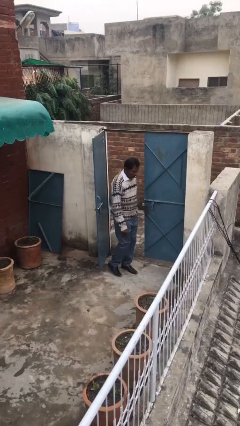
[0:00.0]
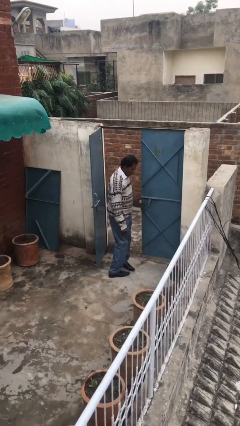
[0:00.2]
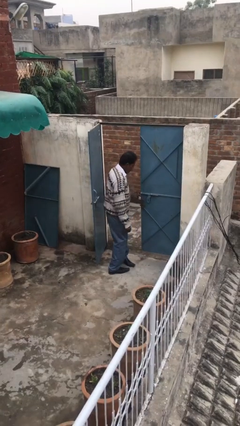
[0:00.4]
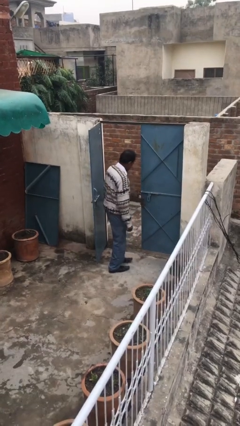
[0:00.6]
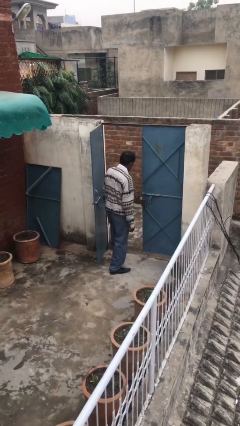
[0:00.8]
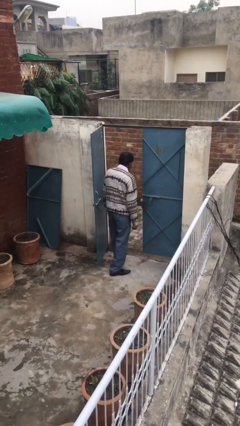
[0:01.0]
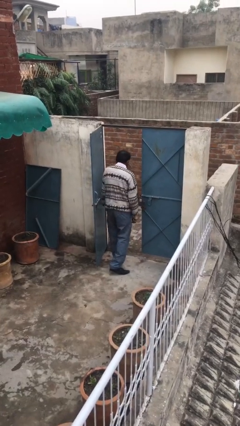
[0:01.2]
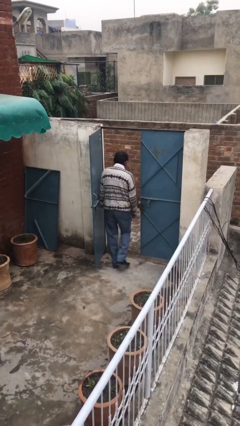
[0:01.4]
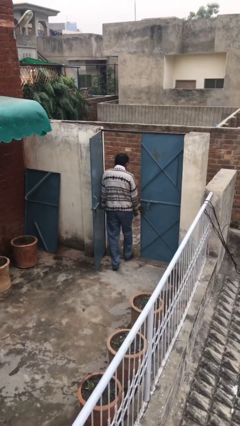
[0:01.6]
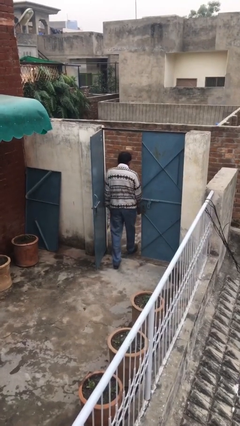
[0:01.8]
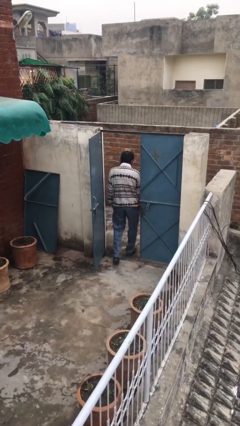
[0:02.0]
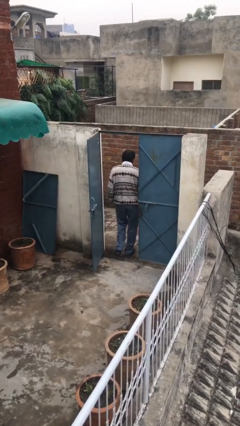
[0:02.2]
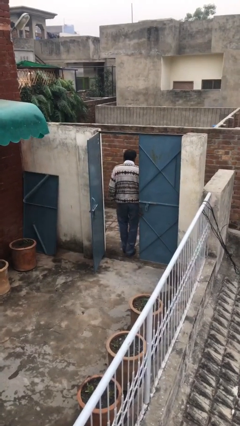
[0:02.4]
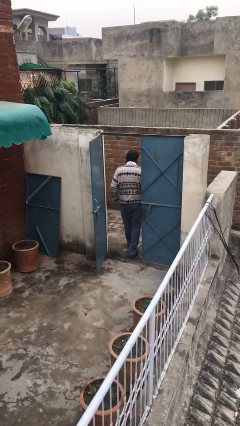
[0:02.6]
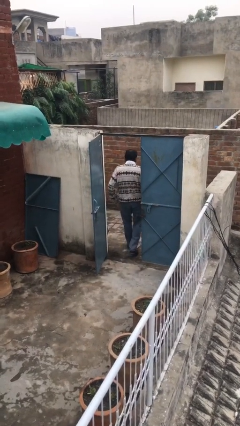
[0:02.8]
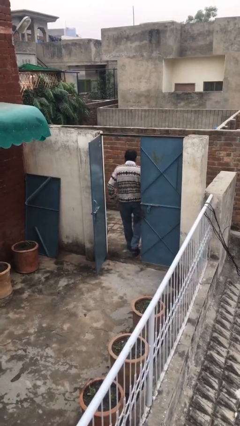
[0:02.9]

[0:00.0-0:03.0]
person exits scene through structure

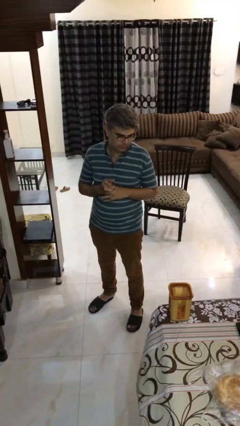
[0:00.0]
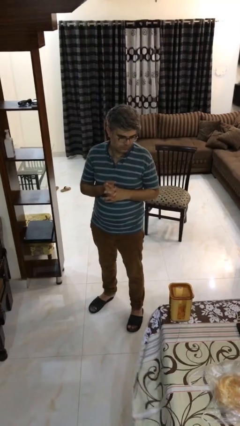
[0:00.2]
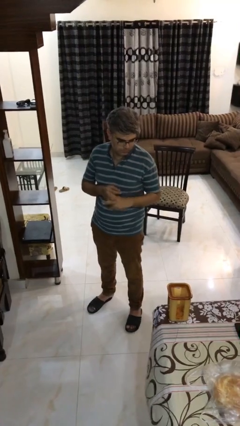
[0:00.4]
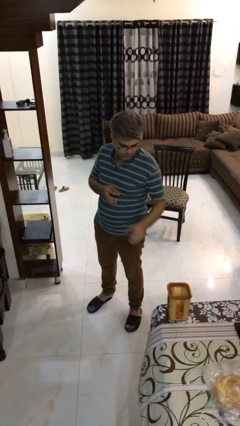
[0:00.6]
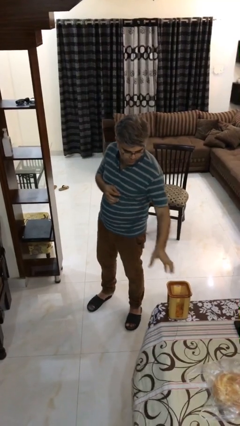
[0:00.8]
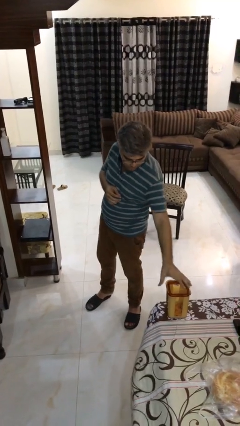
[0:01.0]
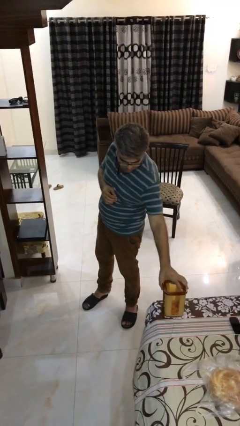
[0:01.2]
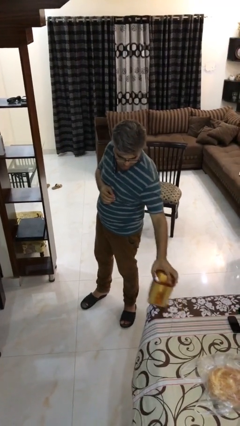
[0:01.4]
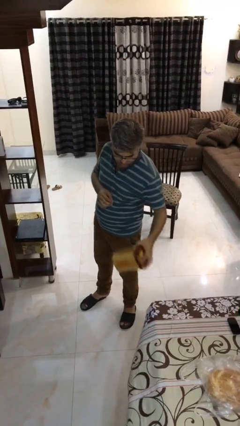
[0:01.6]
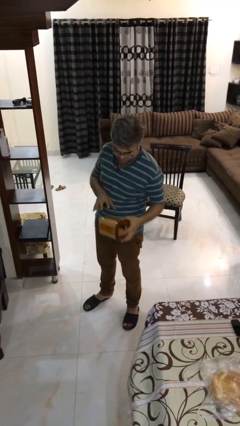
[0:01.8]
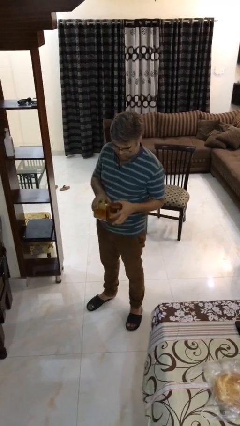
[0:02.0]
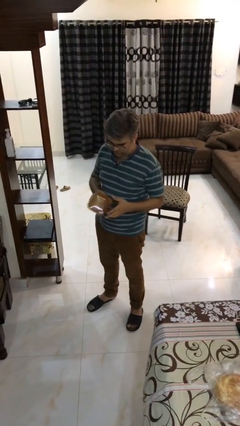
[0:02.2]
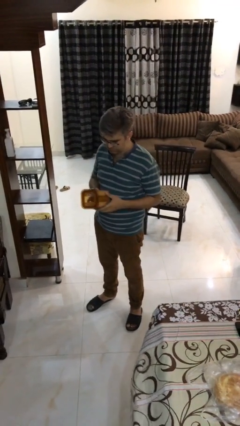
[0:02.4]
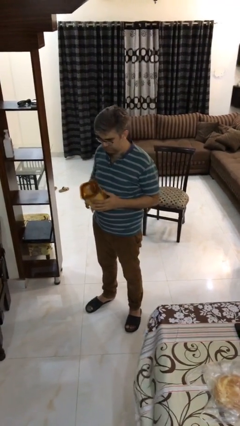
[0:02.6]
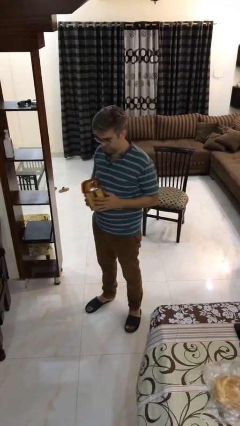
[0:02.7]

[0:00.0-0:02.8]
person picks up object from table

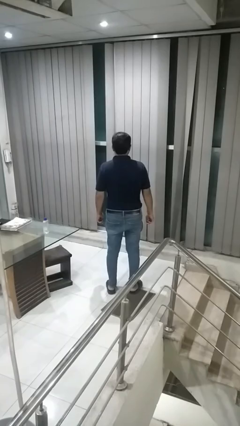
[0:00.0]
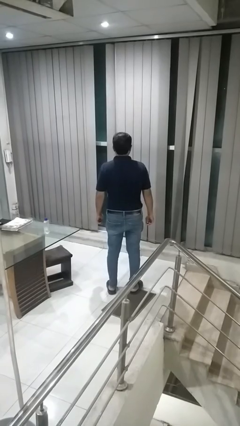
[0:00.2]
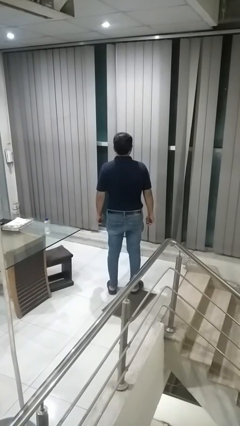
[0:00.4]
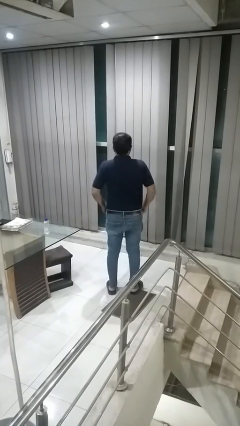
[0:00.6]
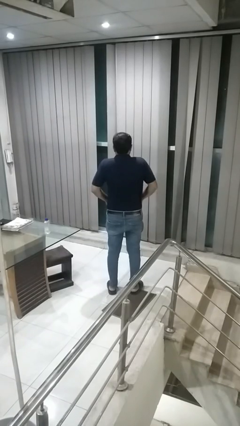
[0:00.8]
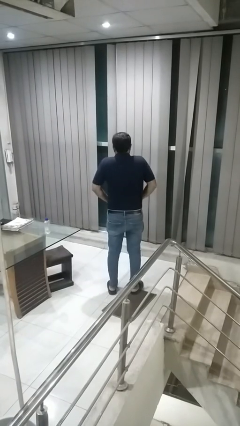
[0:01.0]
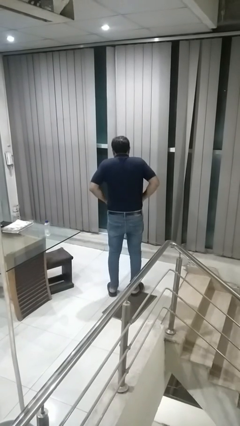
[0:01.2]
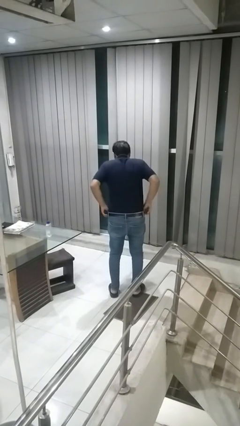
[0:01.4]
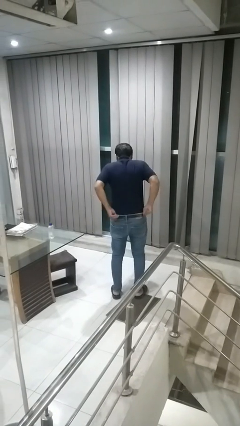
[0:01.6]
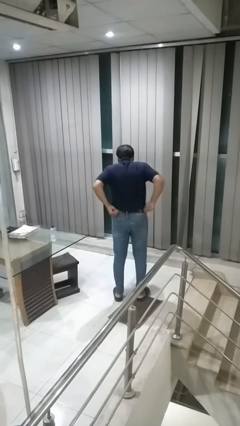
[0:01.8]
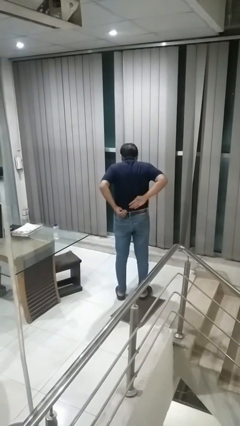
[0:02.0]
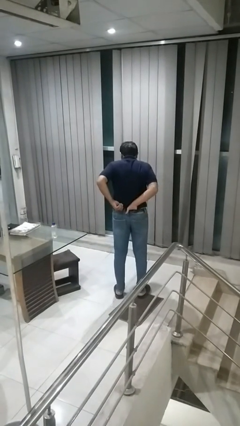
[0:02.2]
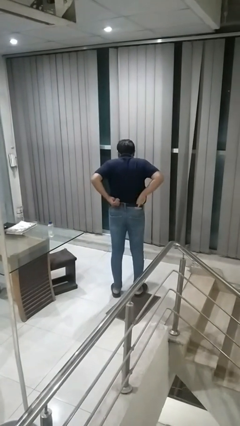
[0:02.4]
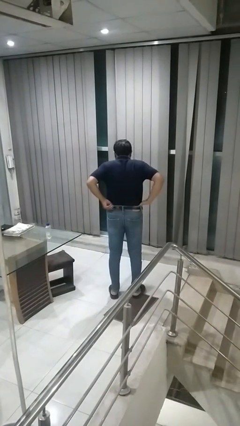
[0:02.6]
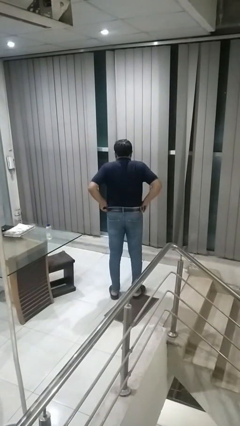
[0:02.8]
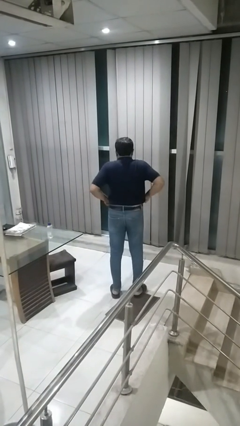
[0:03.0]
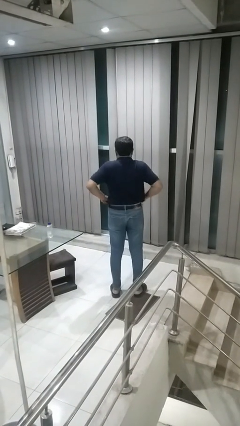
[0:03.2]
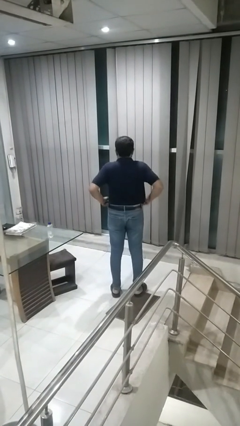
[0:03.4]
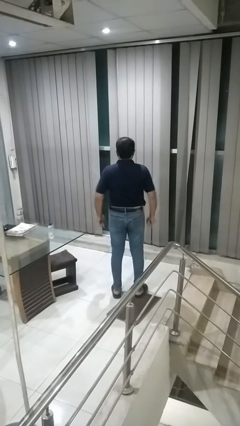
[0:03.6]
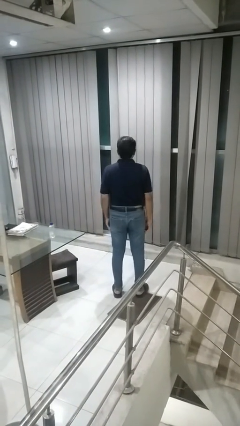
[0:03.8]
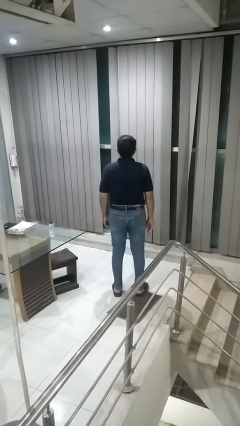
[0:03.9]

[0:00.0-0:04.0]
person hikes up pants

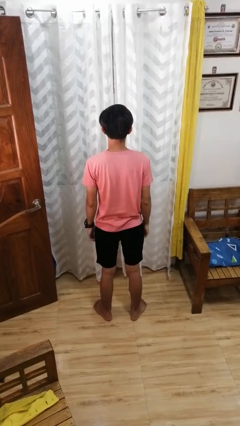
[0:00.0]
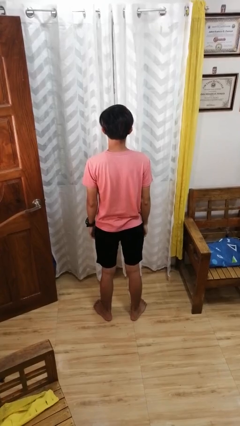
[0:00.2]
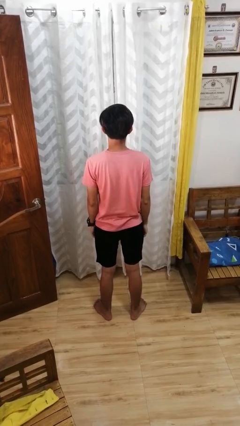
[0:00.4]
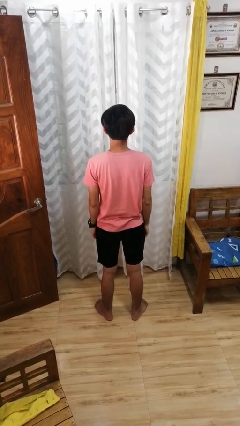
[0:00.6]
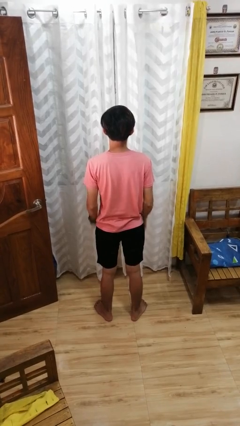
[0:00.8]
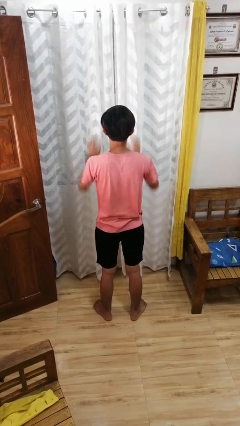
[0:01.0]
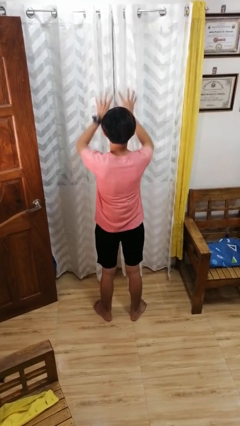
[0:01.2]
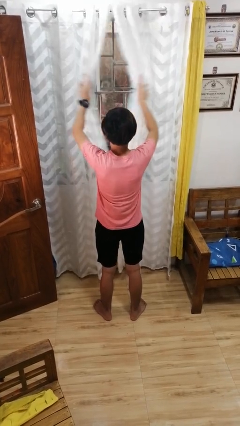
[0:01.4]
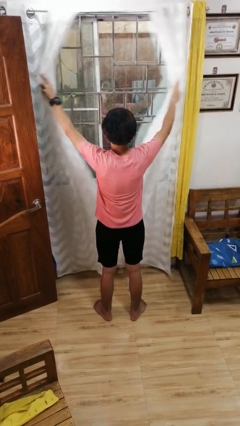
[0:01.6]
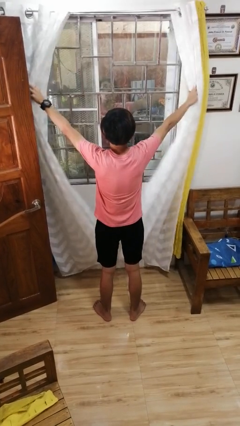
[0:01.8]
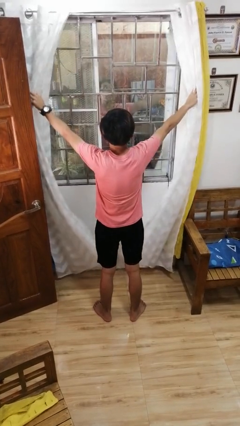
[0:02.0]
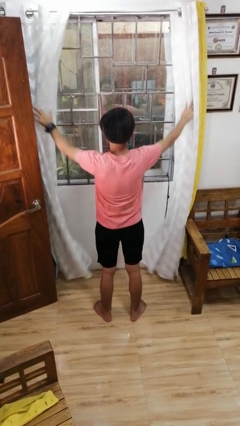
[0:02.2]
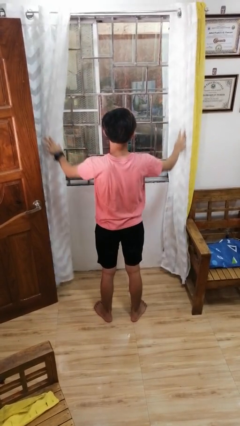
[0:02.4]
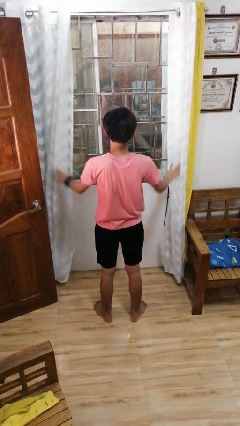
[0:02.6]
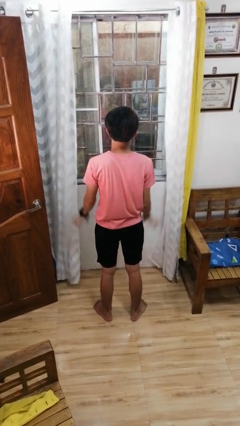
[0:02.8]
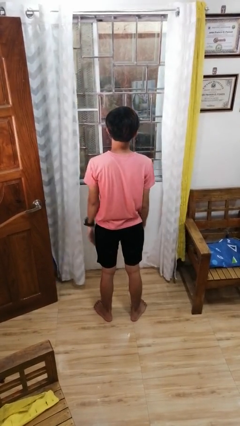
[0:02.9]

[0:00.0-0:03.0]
person opens curtains

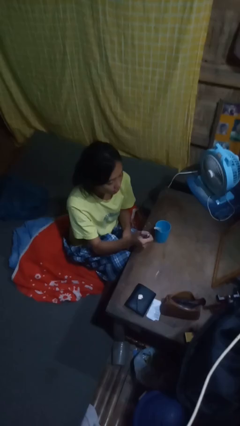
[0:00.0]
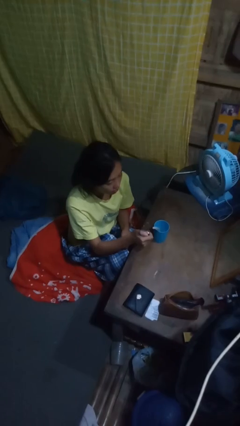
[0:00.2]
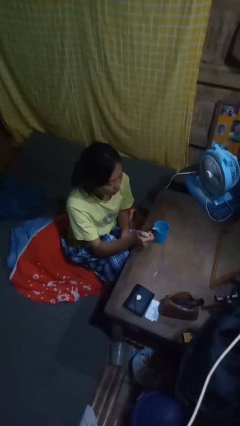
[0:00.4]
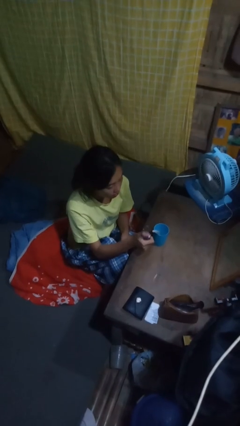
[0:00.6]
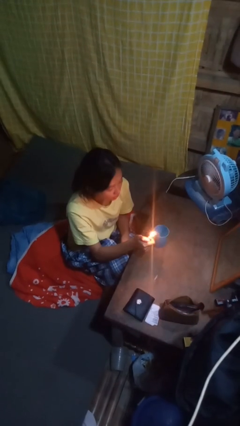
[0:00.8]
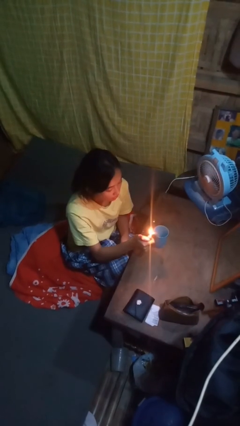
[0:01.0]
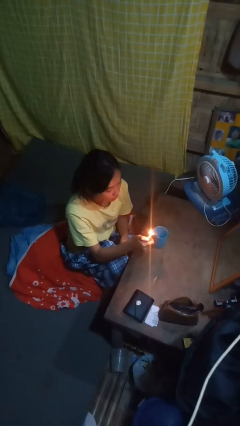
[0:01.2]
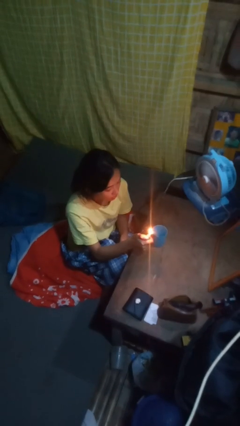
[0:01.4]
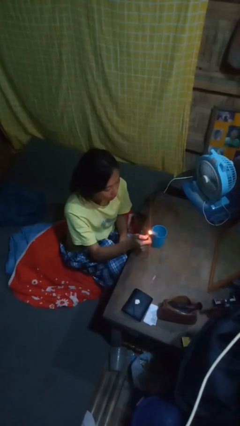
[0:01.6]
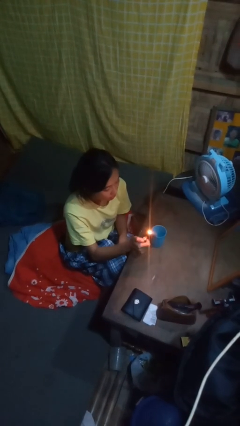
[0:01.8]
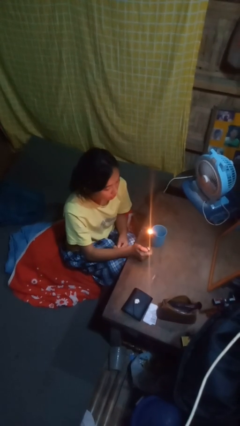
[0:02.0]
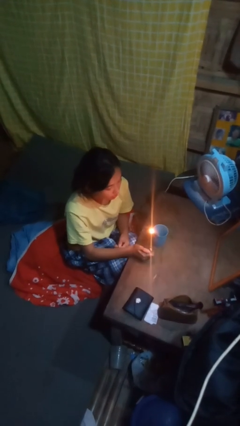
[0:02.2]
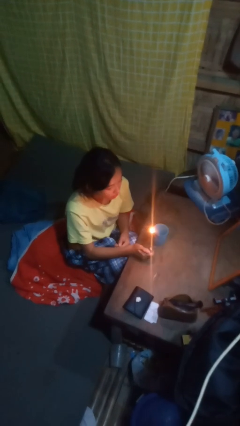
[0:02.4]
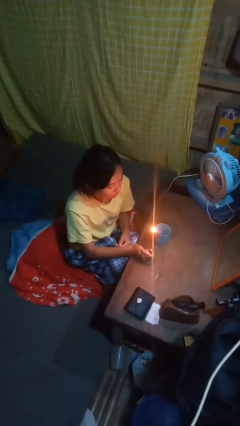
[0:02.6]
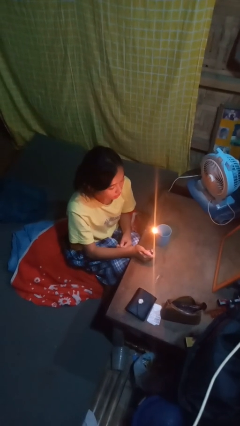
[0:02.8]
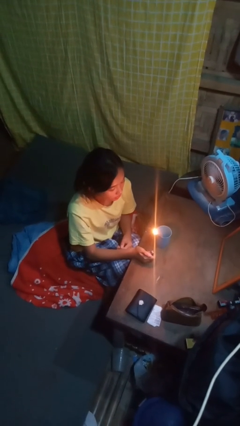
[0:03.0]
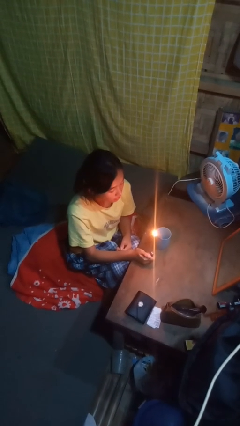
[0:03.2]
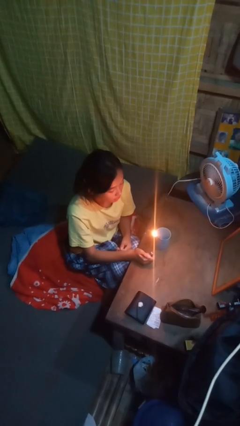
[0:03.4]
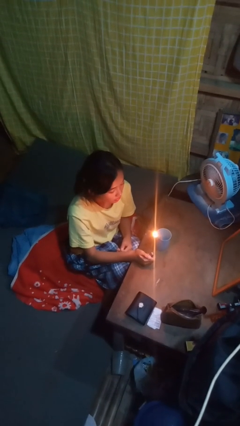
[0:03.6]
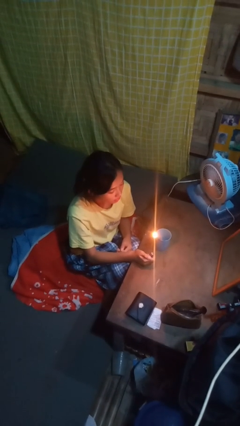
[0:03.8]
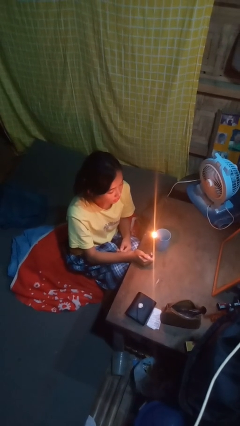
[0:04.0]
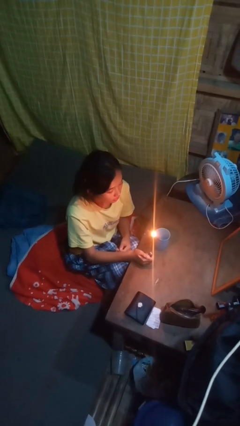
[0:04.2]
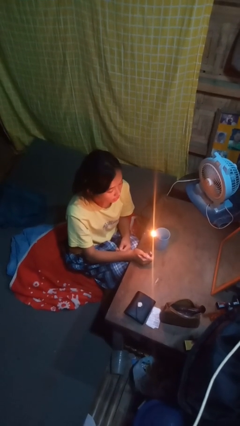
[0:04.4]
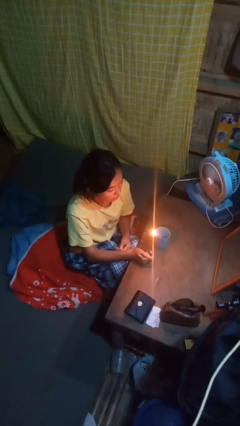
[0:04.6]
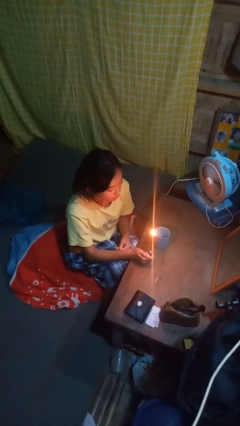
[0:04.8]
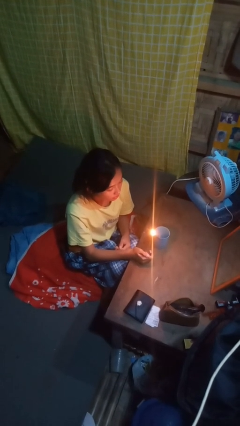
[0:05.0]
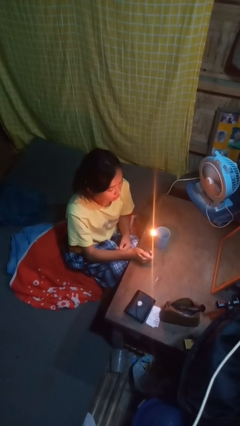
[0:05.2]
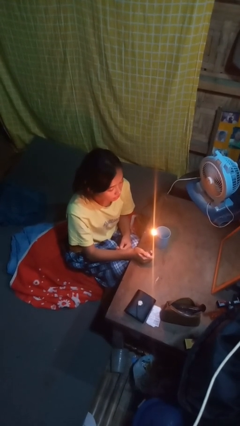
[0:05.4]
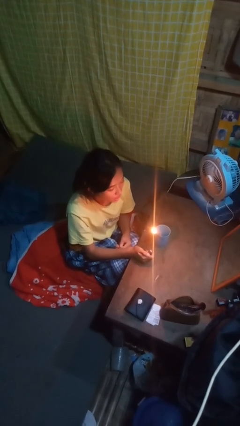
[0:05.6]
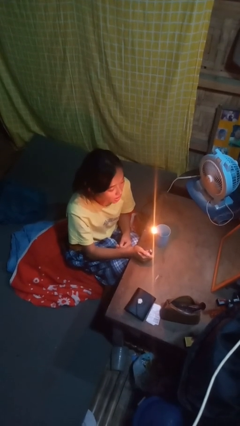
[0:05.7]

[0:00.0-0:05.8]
person lights candle
